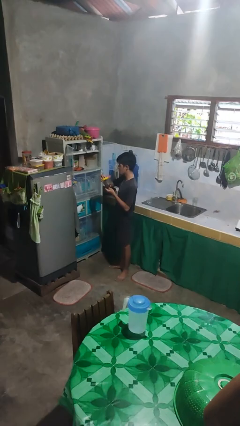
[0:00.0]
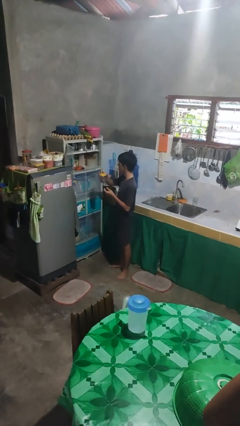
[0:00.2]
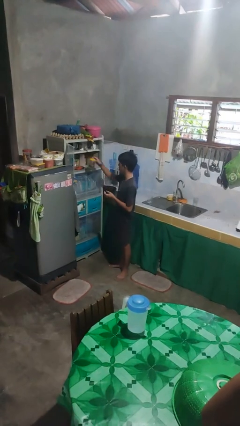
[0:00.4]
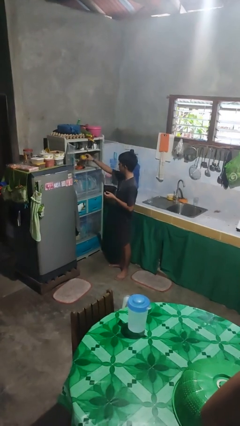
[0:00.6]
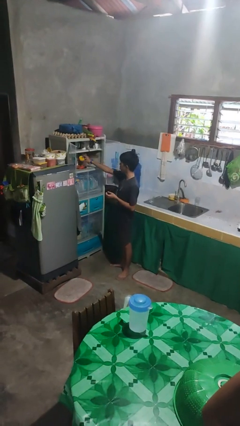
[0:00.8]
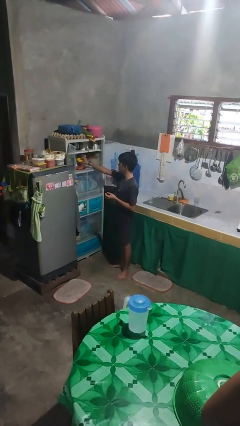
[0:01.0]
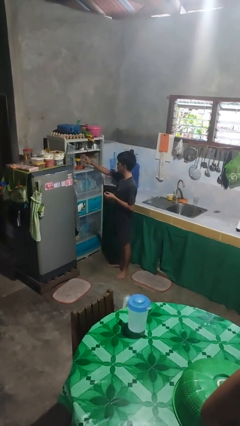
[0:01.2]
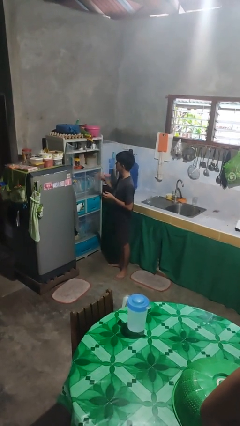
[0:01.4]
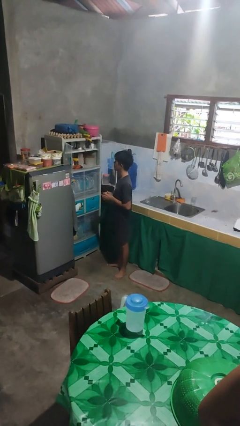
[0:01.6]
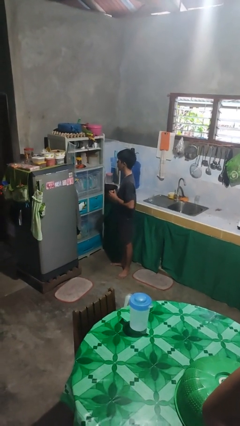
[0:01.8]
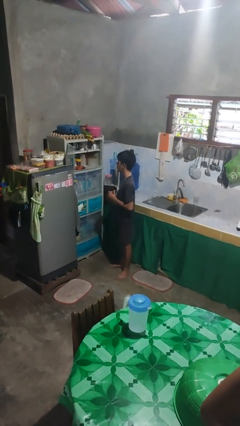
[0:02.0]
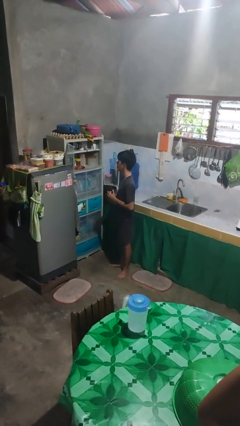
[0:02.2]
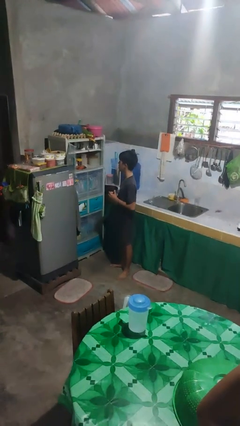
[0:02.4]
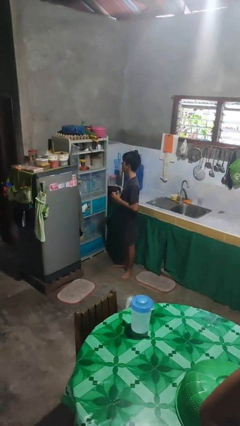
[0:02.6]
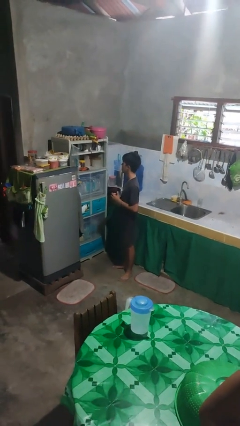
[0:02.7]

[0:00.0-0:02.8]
person puts object in cabinet

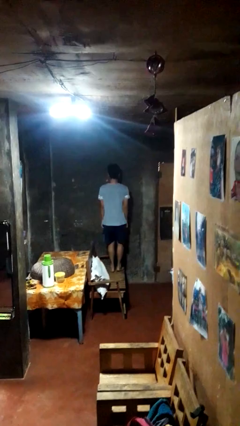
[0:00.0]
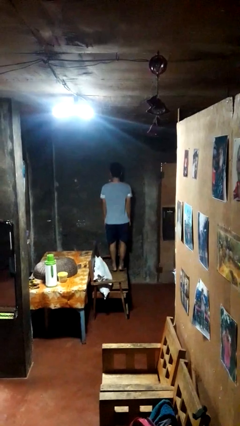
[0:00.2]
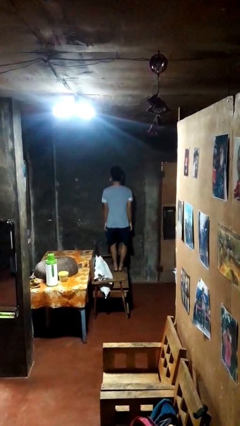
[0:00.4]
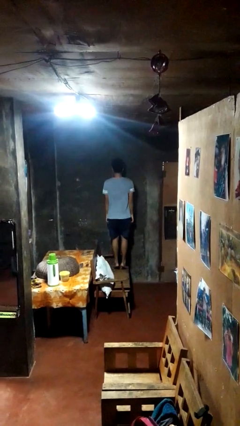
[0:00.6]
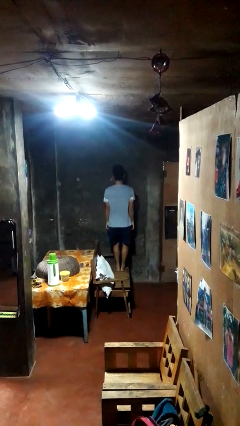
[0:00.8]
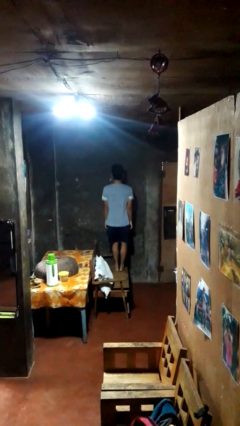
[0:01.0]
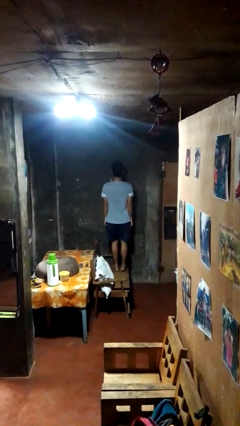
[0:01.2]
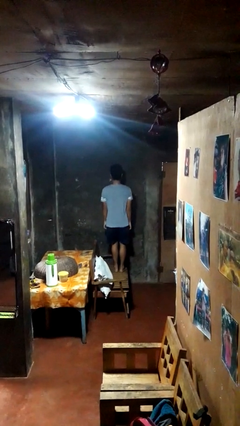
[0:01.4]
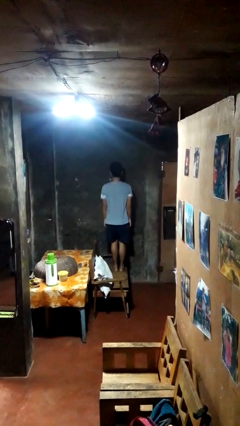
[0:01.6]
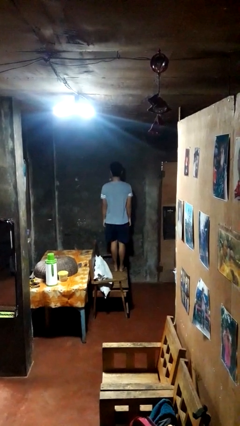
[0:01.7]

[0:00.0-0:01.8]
person jumps on couch

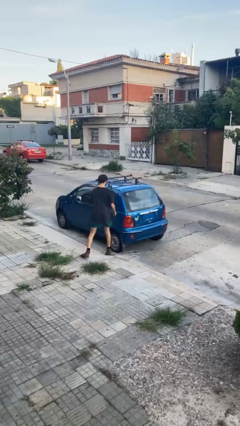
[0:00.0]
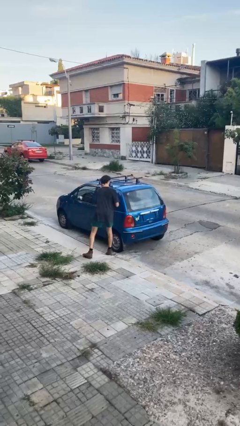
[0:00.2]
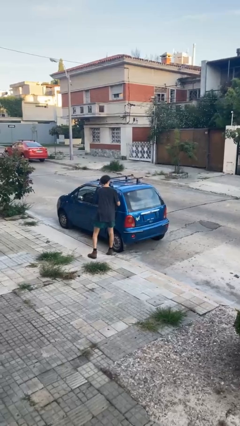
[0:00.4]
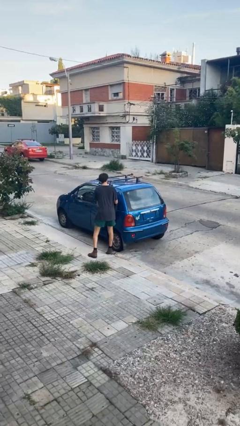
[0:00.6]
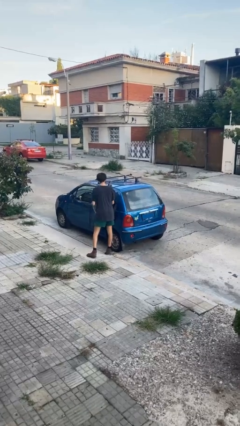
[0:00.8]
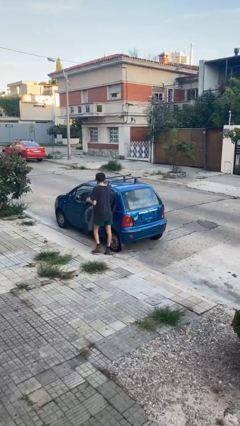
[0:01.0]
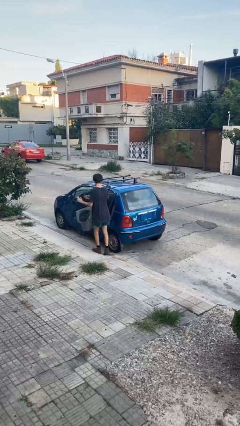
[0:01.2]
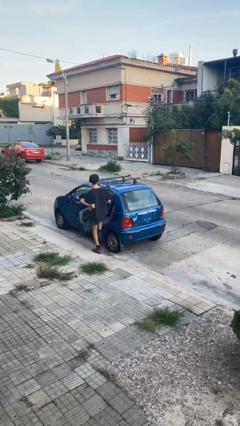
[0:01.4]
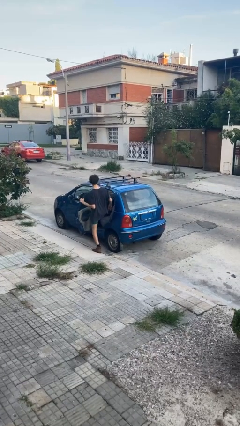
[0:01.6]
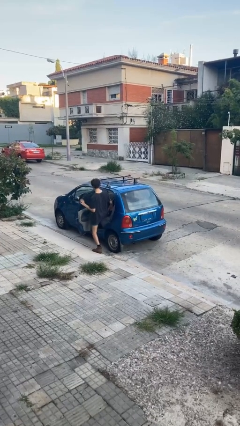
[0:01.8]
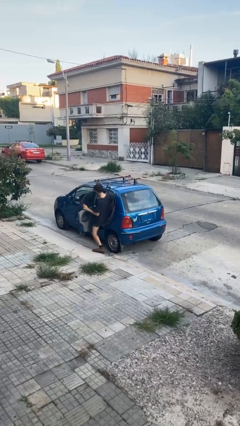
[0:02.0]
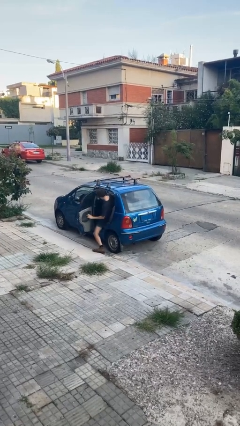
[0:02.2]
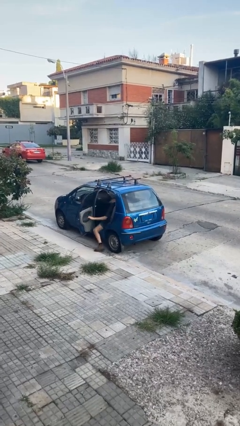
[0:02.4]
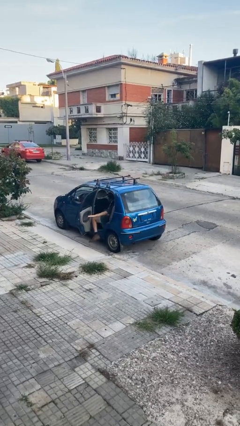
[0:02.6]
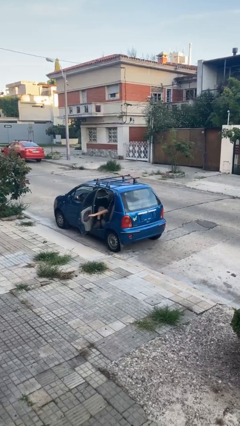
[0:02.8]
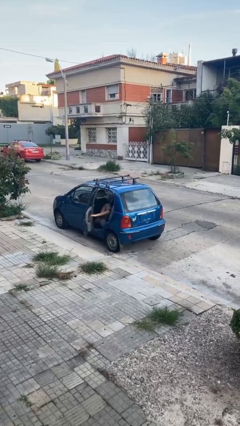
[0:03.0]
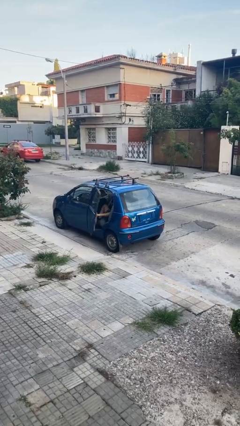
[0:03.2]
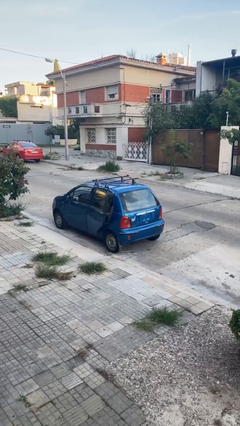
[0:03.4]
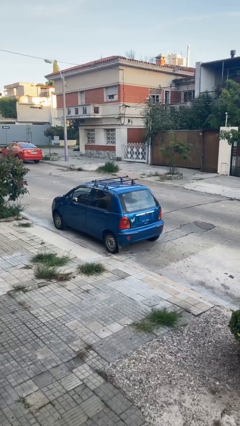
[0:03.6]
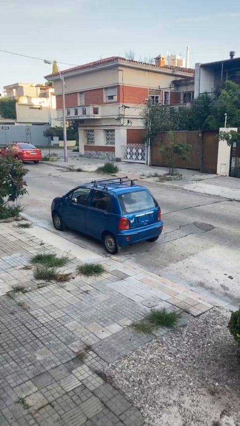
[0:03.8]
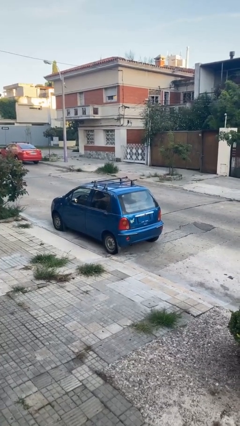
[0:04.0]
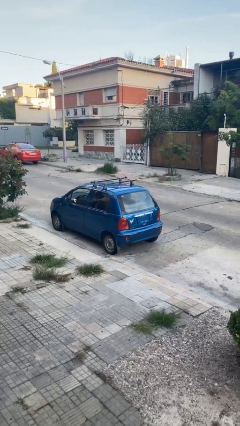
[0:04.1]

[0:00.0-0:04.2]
car picks up person

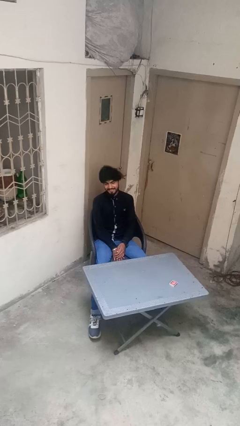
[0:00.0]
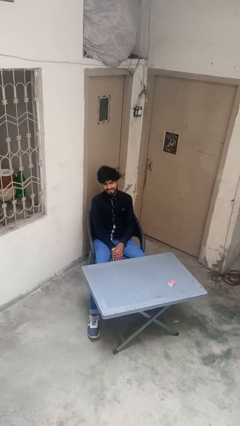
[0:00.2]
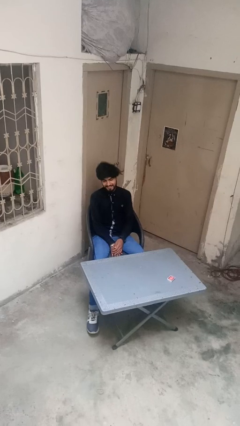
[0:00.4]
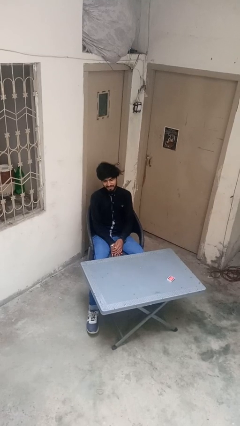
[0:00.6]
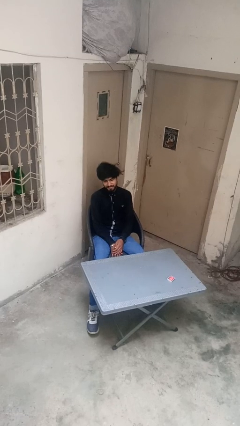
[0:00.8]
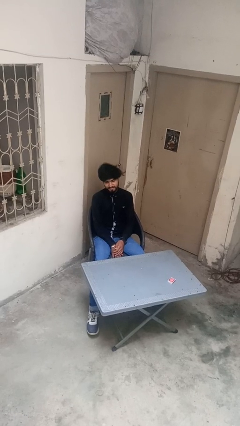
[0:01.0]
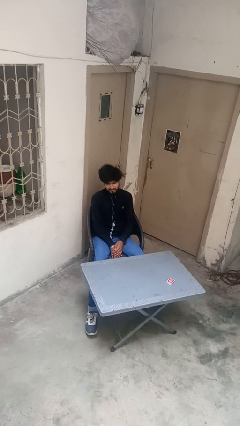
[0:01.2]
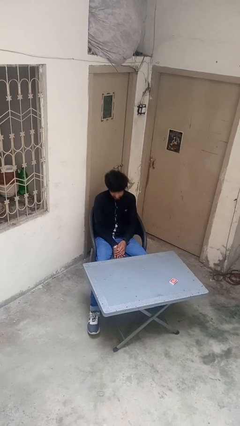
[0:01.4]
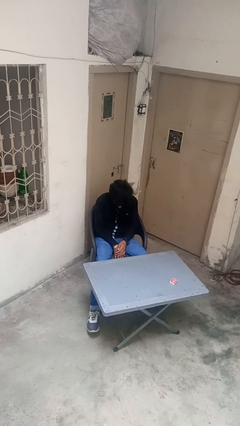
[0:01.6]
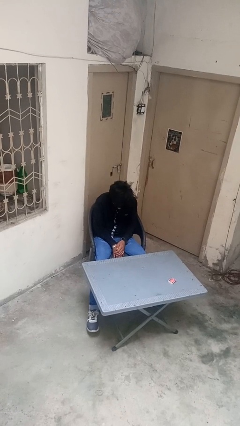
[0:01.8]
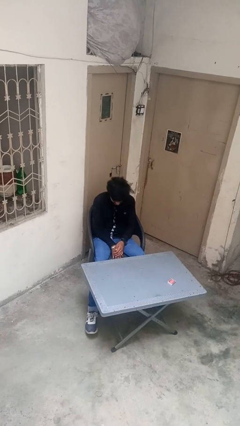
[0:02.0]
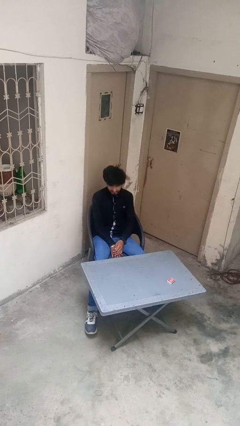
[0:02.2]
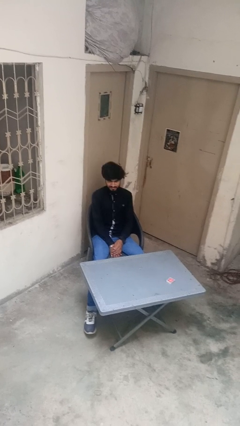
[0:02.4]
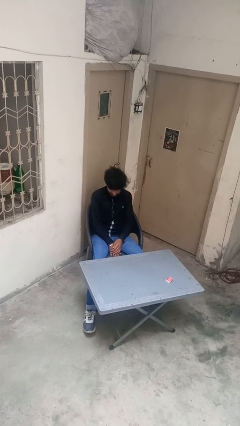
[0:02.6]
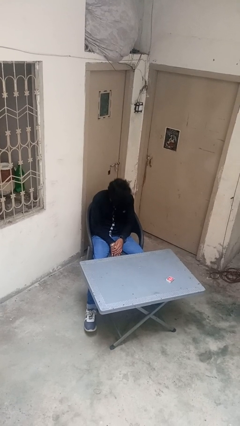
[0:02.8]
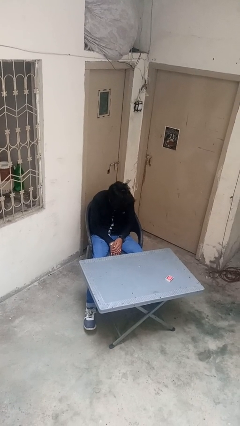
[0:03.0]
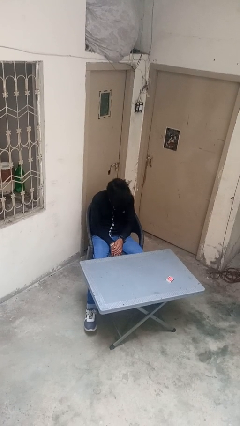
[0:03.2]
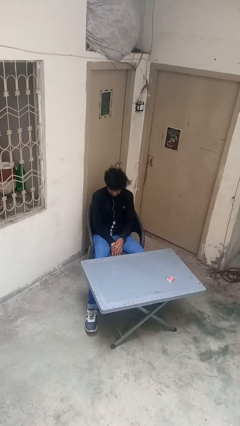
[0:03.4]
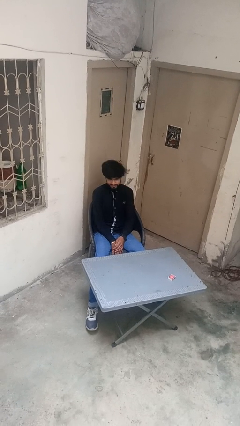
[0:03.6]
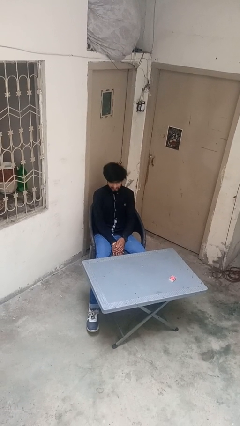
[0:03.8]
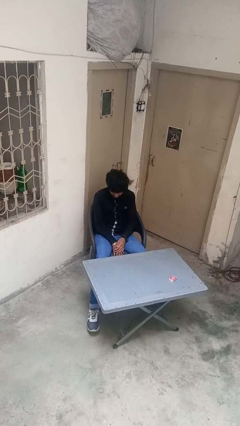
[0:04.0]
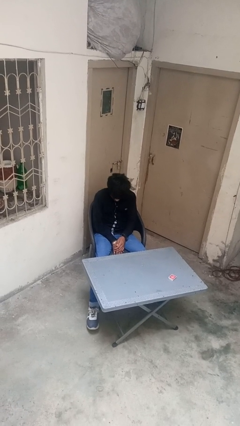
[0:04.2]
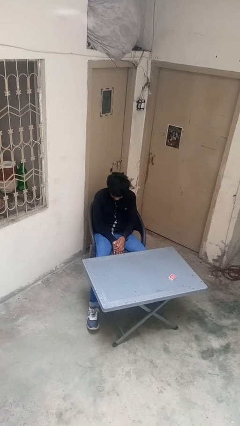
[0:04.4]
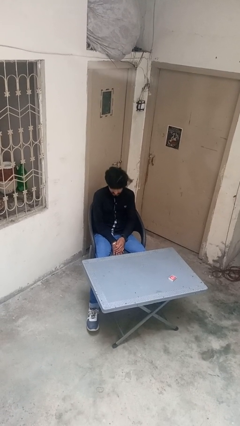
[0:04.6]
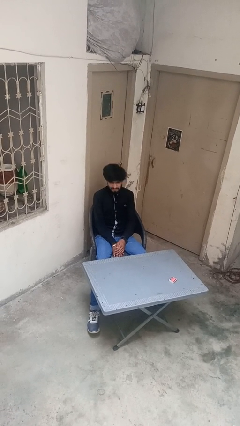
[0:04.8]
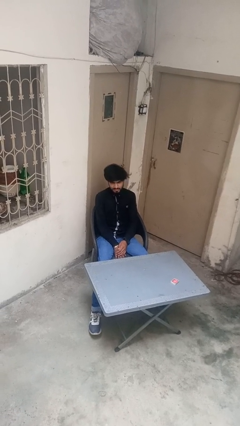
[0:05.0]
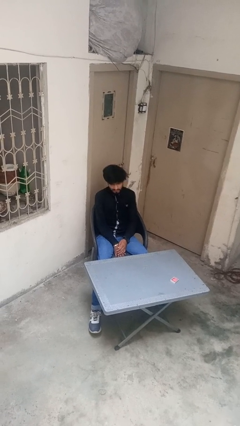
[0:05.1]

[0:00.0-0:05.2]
person nods head

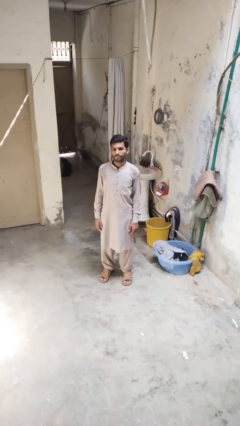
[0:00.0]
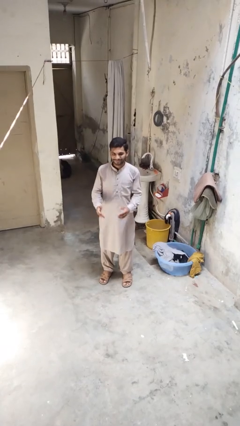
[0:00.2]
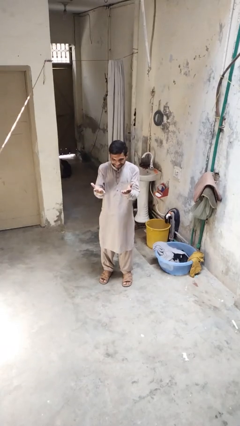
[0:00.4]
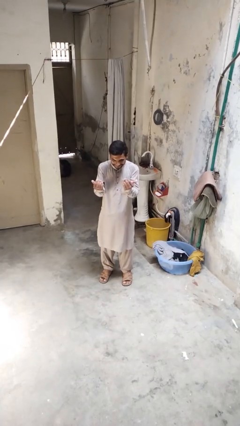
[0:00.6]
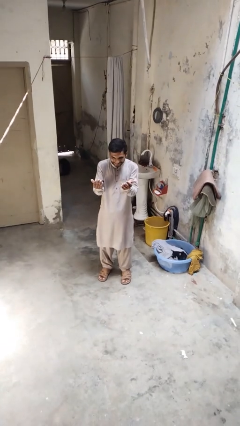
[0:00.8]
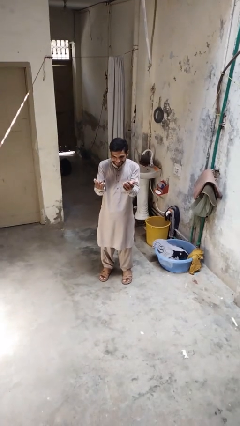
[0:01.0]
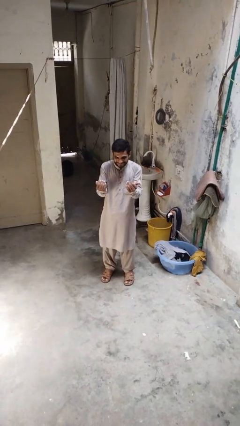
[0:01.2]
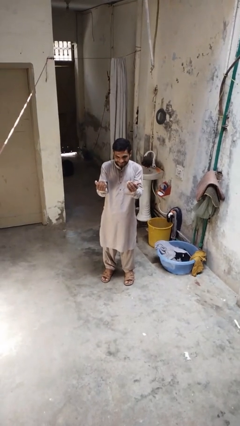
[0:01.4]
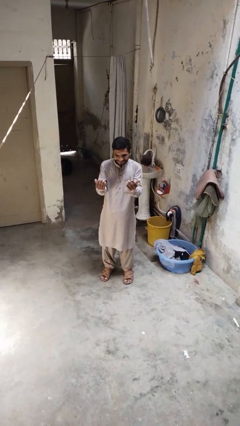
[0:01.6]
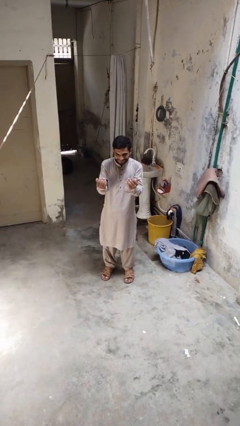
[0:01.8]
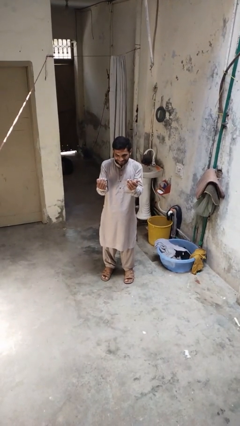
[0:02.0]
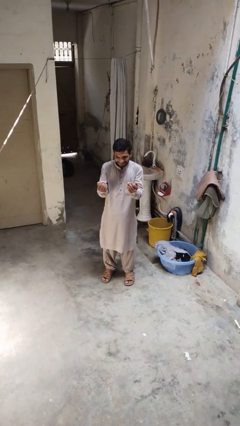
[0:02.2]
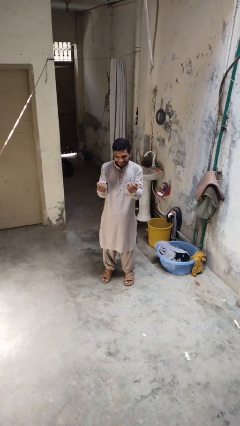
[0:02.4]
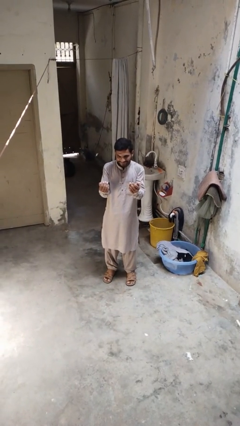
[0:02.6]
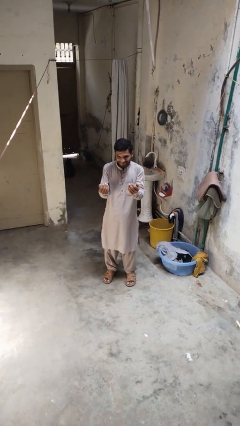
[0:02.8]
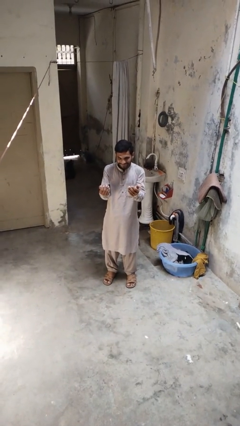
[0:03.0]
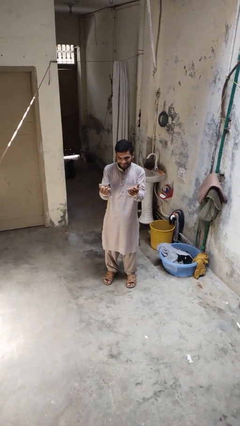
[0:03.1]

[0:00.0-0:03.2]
person gestures come here

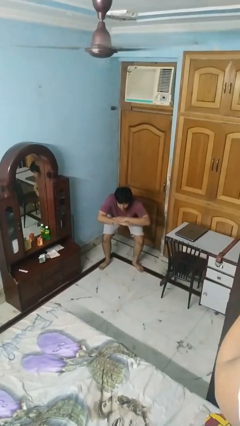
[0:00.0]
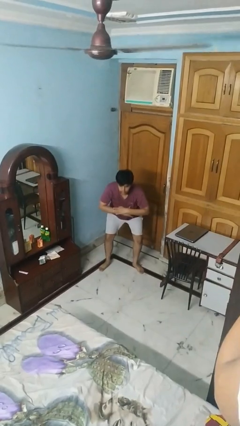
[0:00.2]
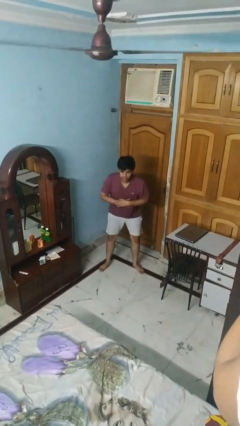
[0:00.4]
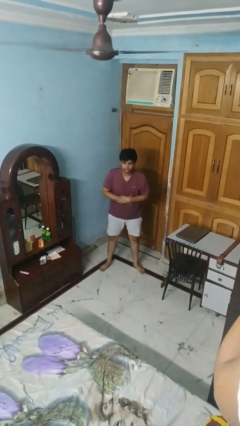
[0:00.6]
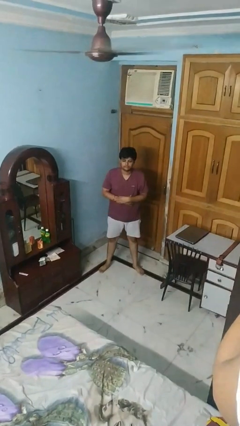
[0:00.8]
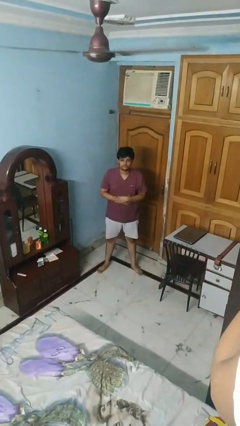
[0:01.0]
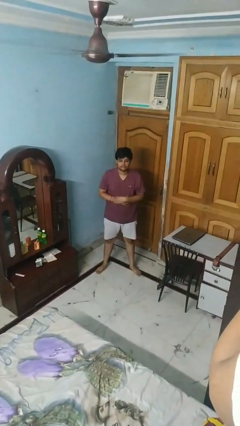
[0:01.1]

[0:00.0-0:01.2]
person stands up
